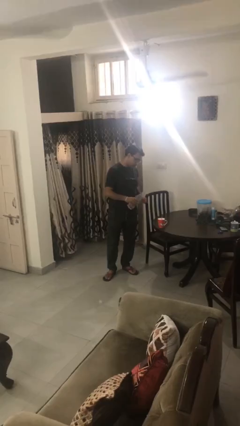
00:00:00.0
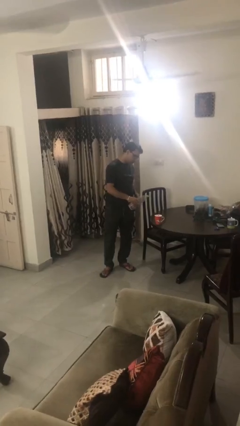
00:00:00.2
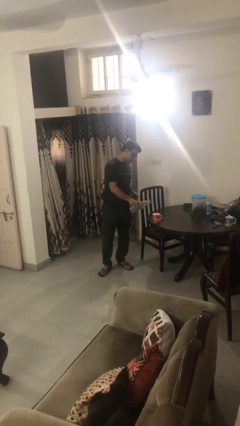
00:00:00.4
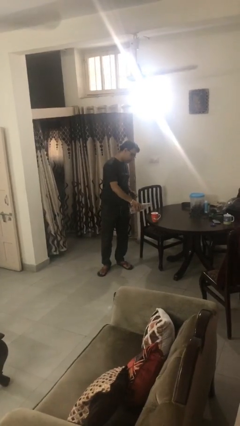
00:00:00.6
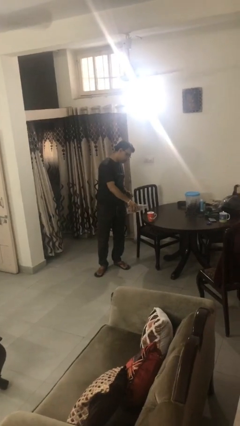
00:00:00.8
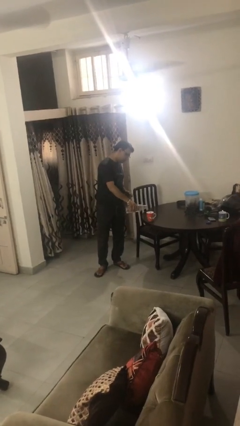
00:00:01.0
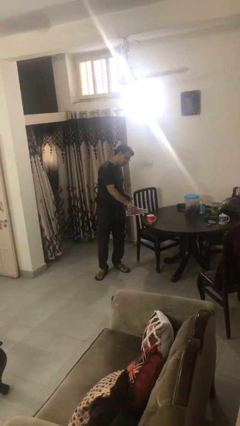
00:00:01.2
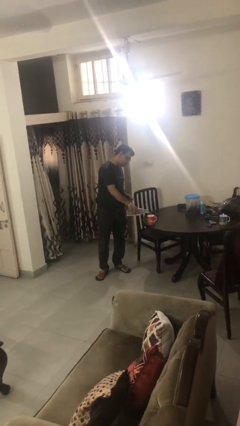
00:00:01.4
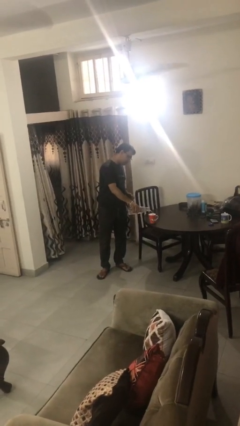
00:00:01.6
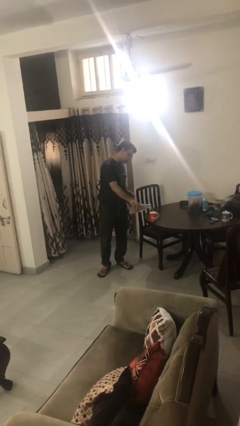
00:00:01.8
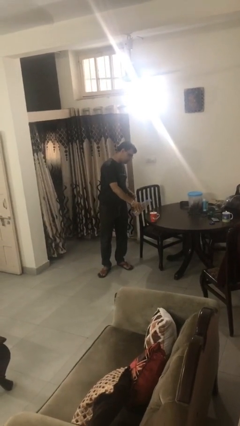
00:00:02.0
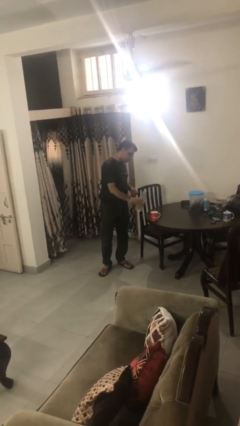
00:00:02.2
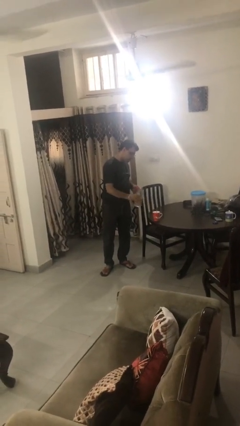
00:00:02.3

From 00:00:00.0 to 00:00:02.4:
person pours liquid into cup

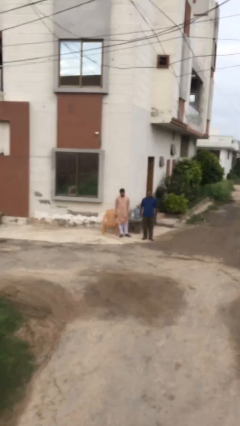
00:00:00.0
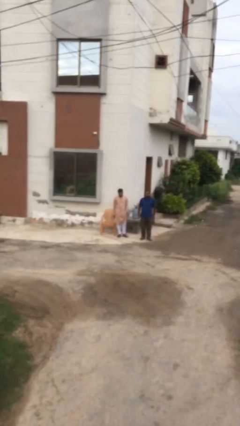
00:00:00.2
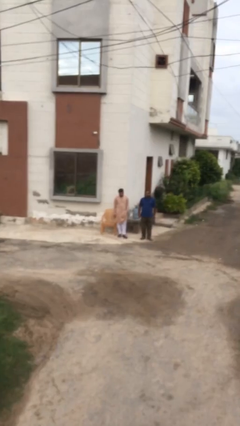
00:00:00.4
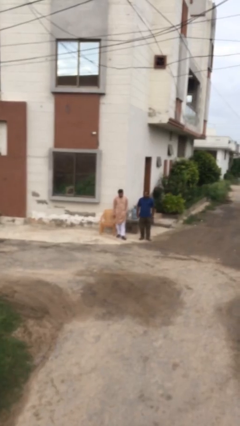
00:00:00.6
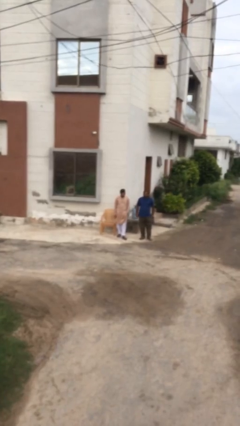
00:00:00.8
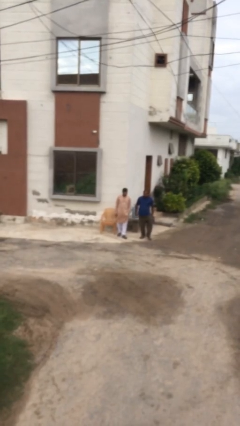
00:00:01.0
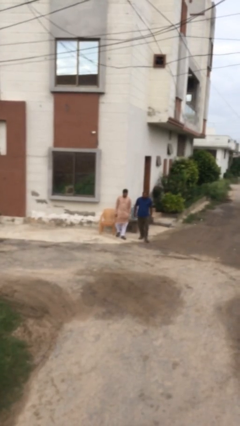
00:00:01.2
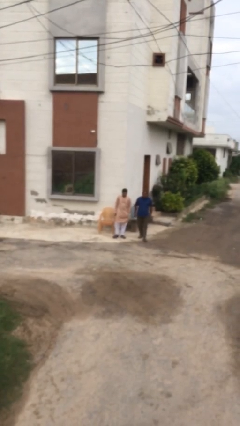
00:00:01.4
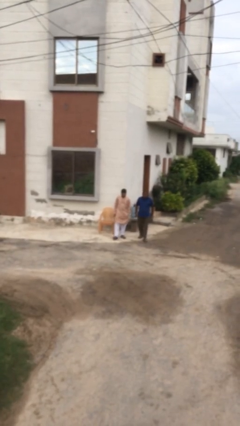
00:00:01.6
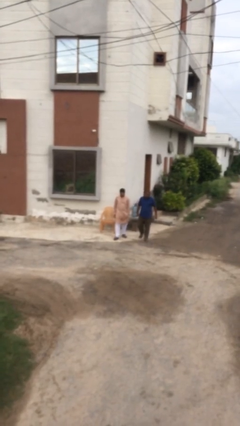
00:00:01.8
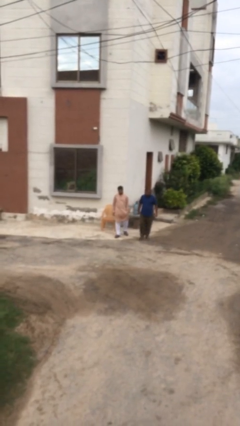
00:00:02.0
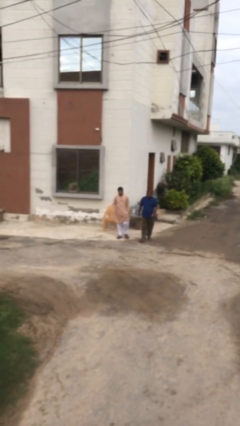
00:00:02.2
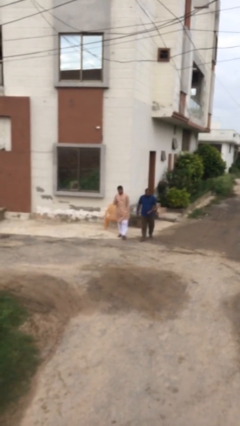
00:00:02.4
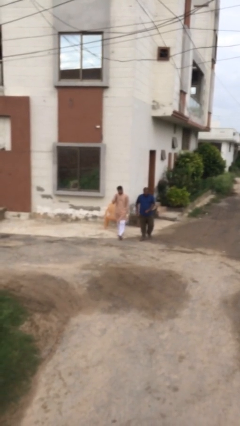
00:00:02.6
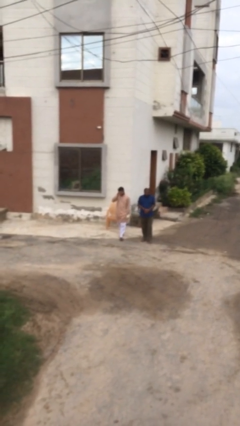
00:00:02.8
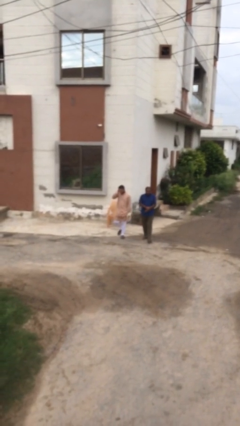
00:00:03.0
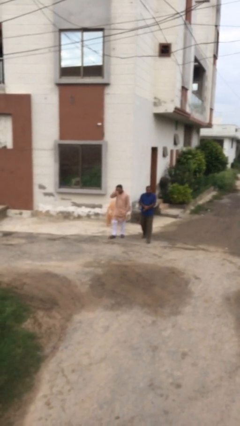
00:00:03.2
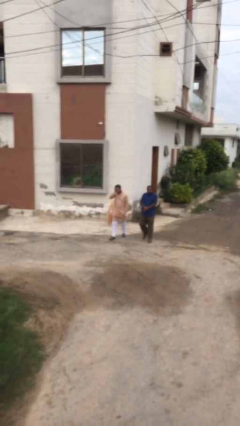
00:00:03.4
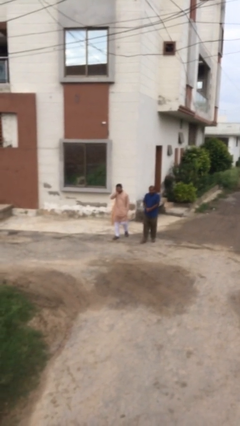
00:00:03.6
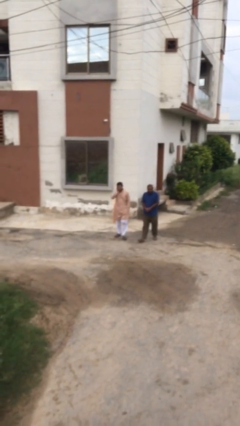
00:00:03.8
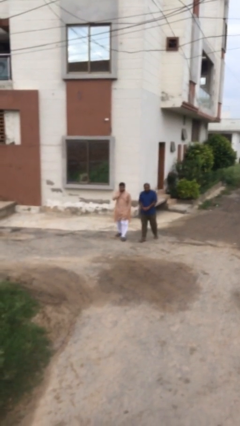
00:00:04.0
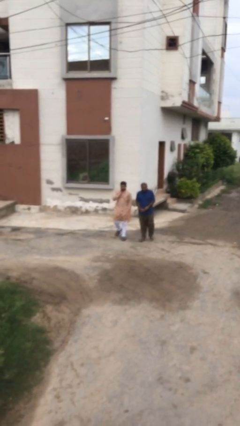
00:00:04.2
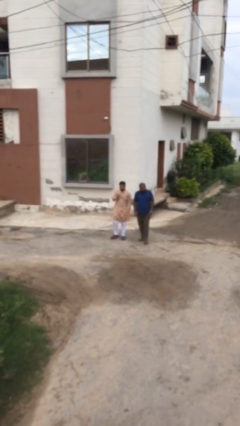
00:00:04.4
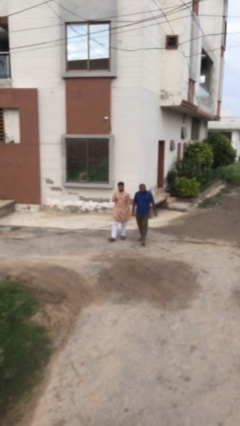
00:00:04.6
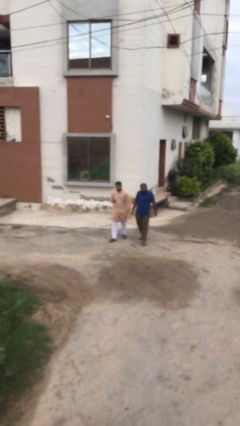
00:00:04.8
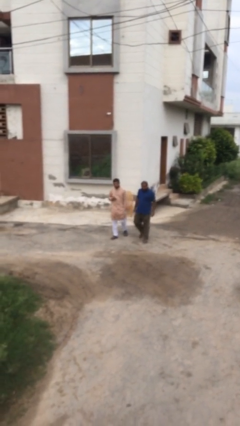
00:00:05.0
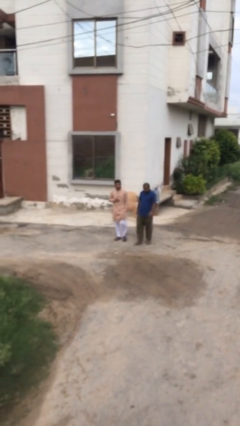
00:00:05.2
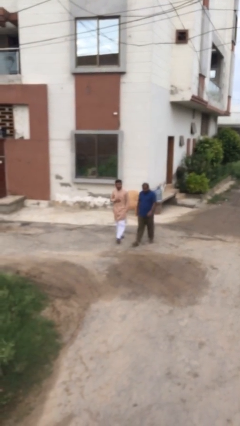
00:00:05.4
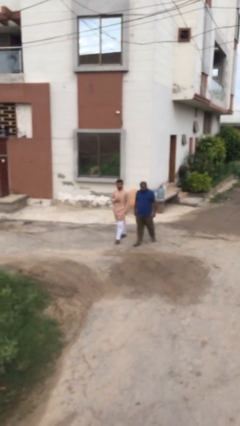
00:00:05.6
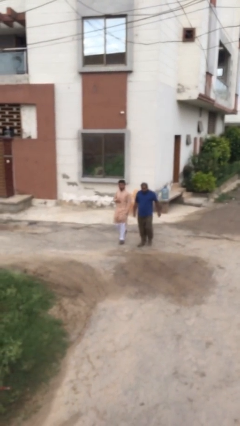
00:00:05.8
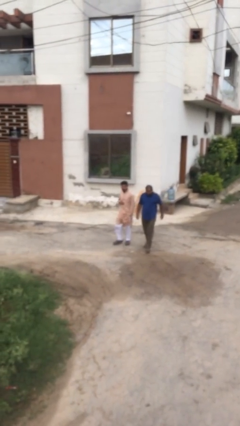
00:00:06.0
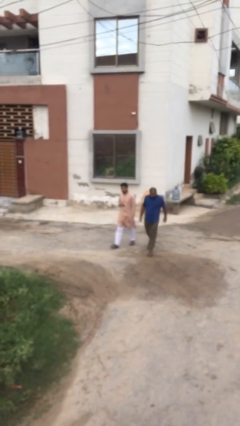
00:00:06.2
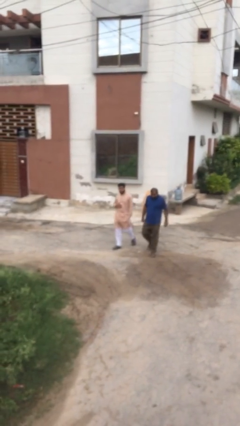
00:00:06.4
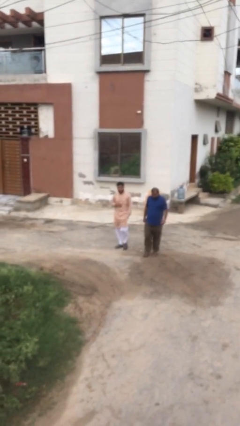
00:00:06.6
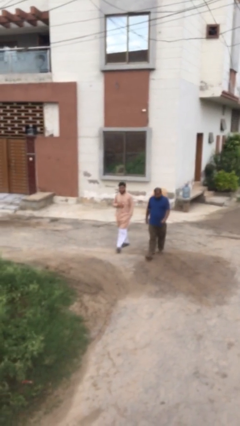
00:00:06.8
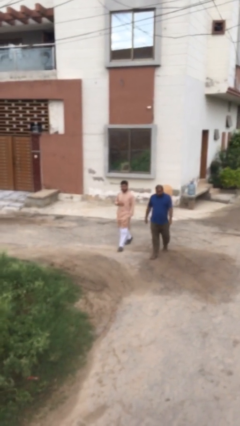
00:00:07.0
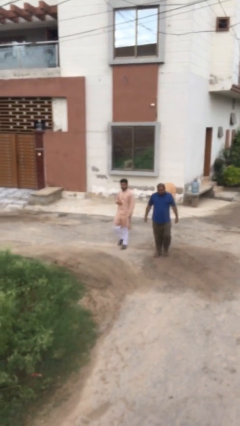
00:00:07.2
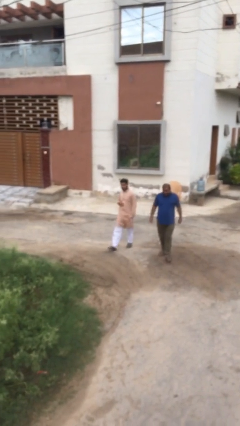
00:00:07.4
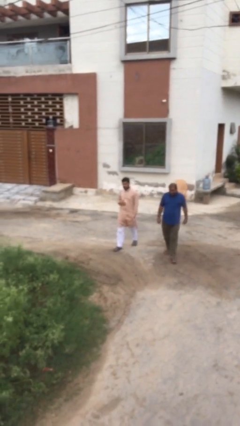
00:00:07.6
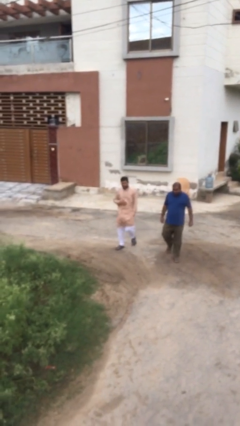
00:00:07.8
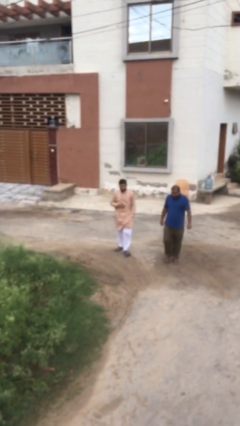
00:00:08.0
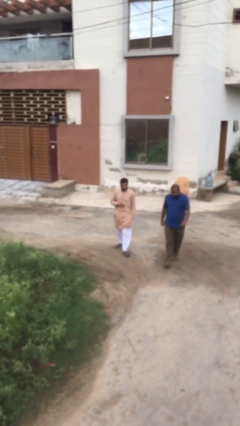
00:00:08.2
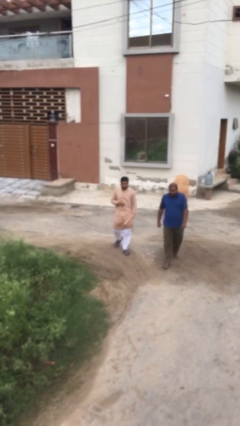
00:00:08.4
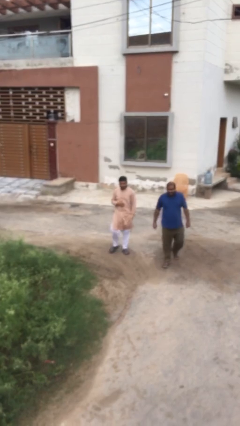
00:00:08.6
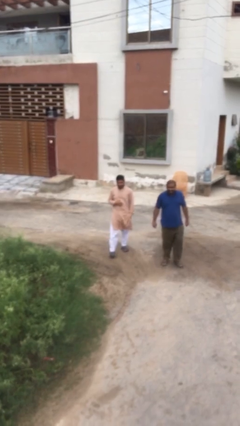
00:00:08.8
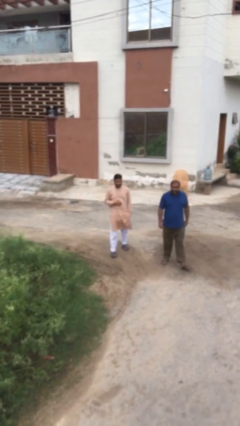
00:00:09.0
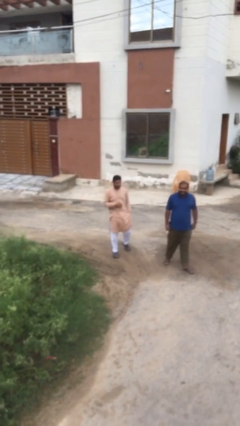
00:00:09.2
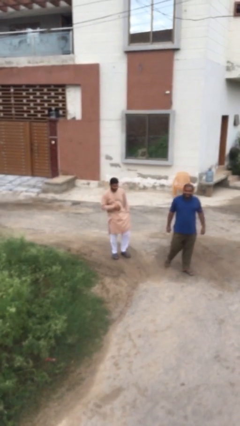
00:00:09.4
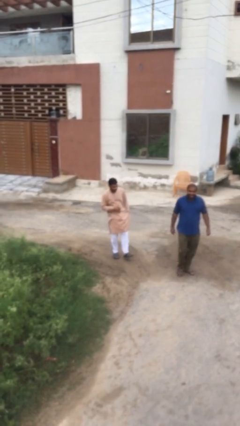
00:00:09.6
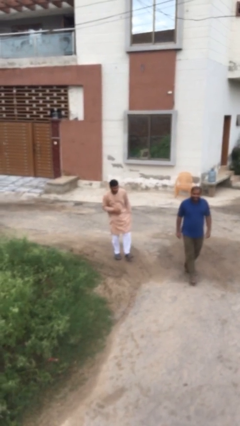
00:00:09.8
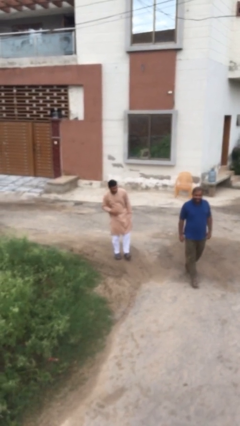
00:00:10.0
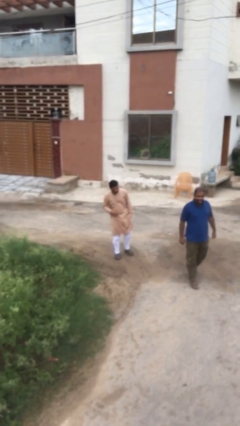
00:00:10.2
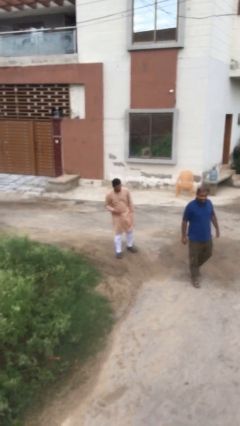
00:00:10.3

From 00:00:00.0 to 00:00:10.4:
person talks to person

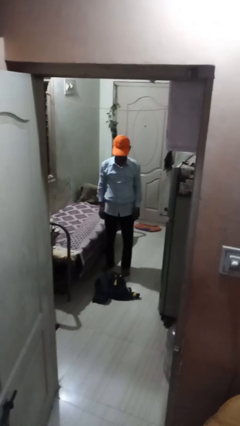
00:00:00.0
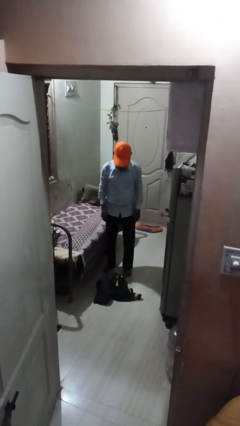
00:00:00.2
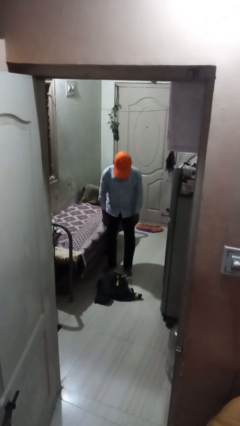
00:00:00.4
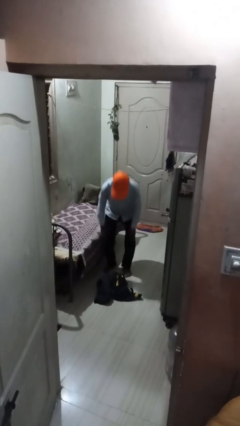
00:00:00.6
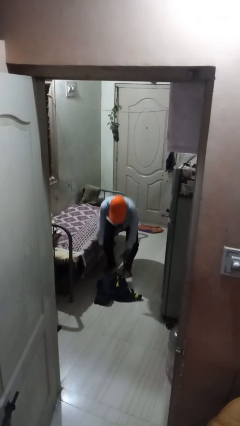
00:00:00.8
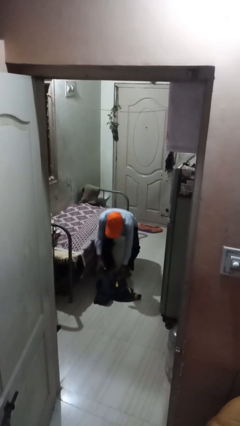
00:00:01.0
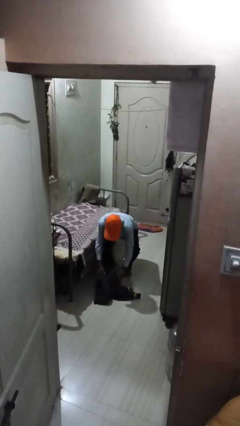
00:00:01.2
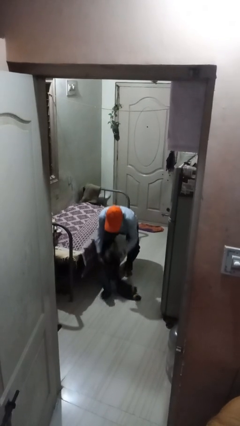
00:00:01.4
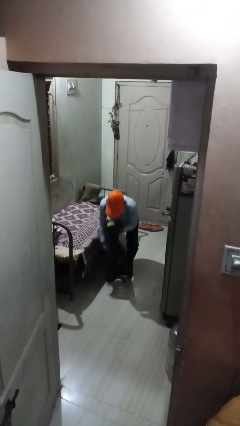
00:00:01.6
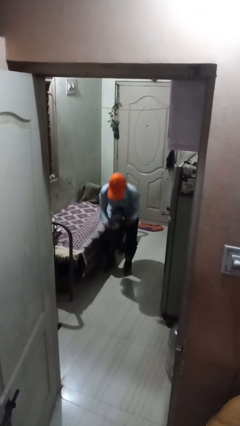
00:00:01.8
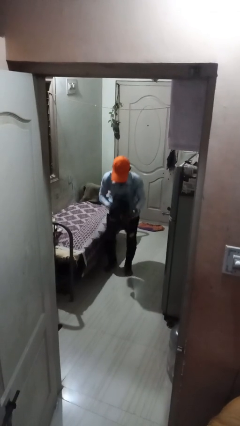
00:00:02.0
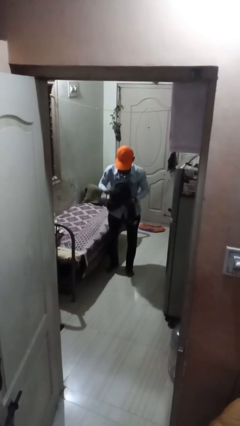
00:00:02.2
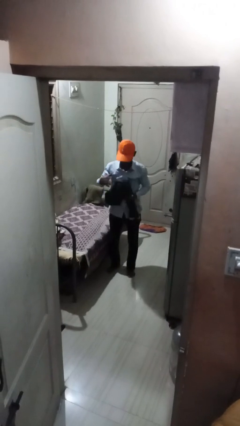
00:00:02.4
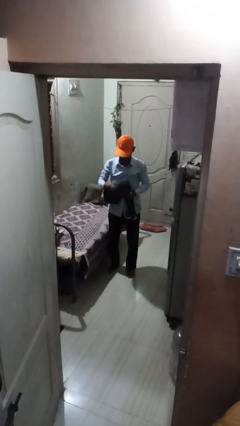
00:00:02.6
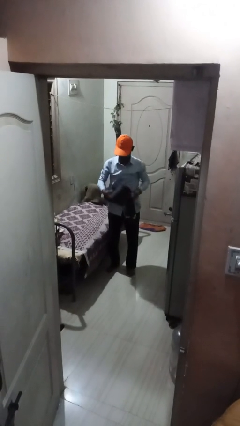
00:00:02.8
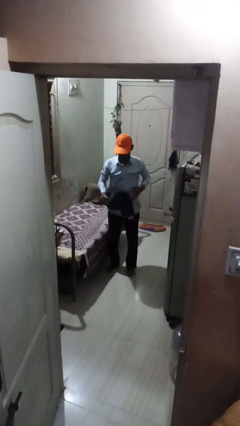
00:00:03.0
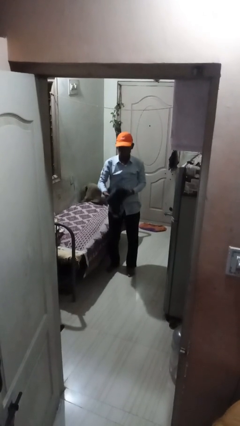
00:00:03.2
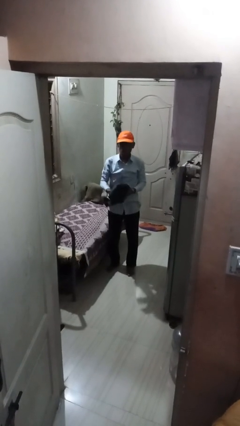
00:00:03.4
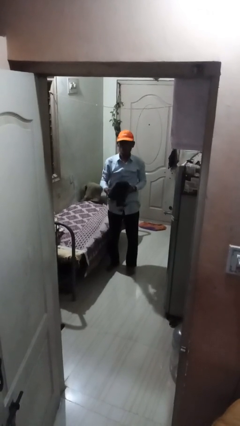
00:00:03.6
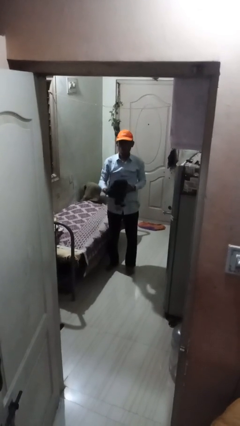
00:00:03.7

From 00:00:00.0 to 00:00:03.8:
person picks up object from floor

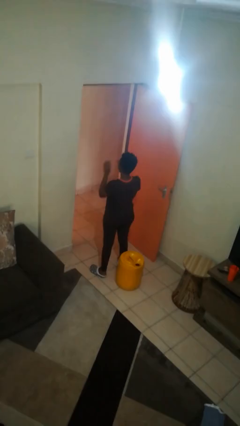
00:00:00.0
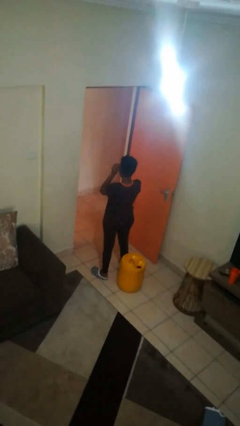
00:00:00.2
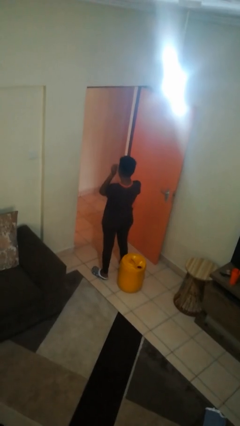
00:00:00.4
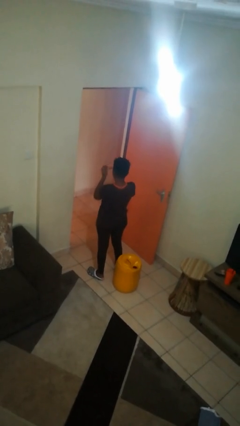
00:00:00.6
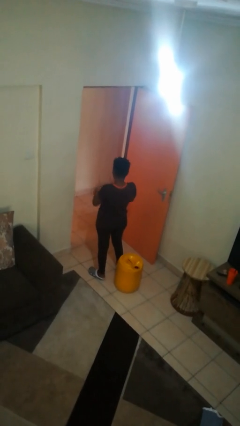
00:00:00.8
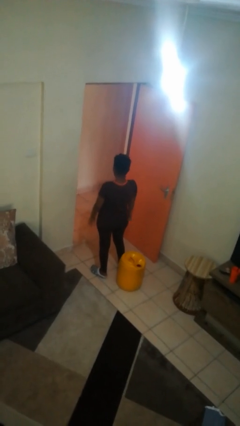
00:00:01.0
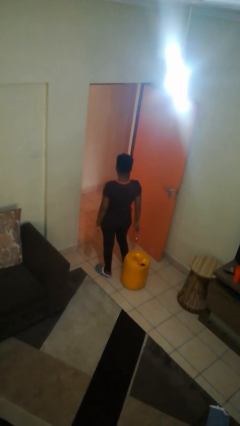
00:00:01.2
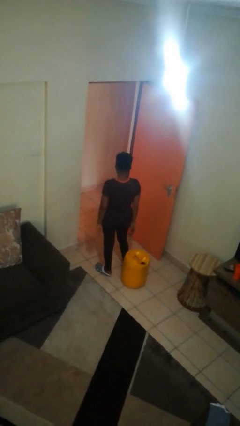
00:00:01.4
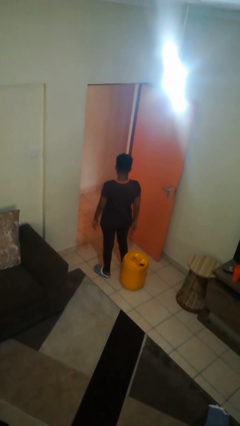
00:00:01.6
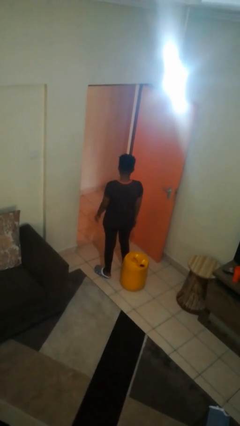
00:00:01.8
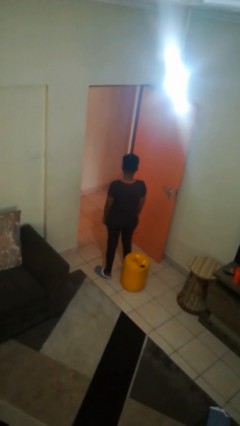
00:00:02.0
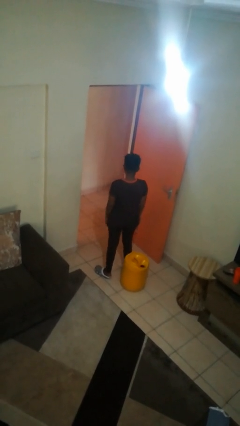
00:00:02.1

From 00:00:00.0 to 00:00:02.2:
person takes off glasses
